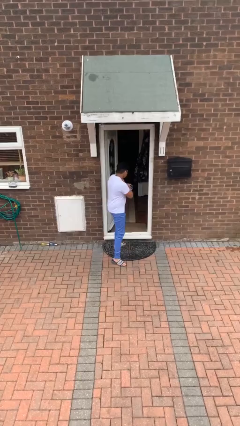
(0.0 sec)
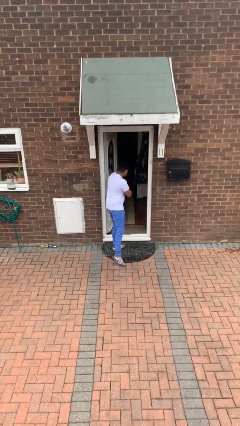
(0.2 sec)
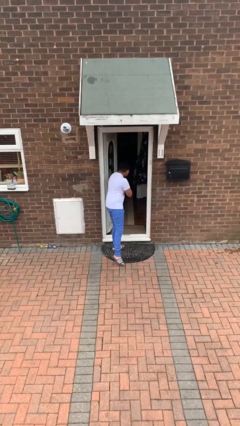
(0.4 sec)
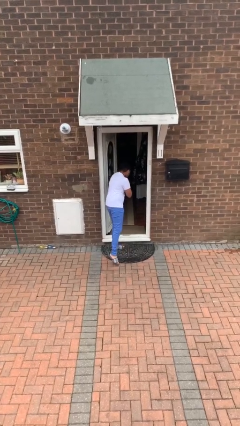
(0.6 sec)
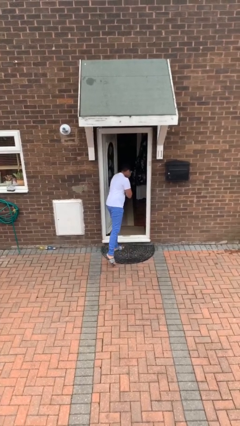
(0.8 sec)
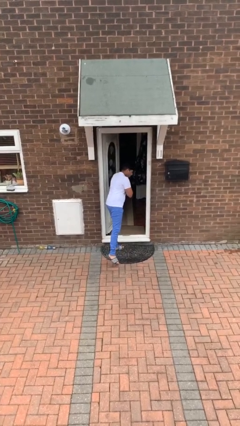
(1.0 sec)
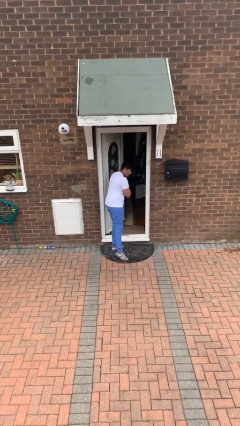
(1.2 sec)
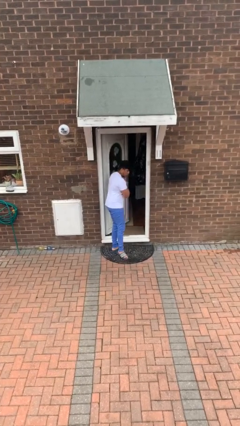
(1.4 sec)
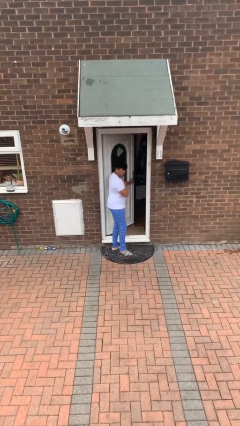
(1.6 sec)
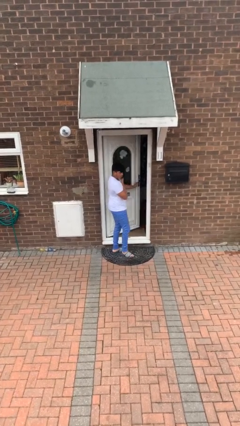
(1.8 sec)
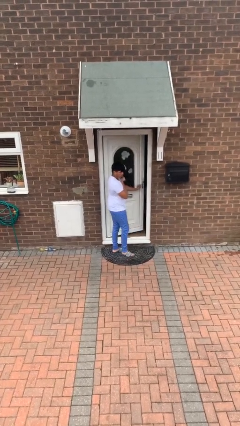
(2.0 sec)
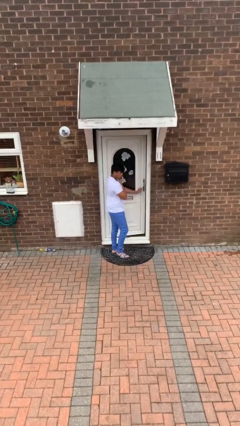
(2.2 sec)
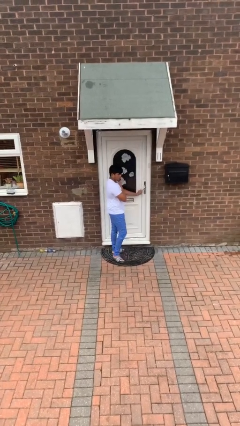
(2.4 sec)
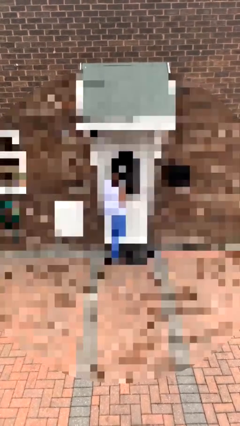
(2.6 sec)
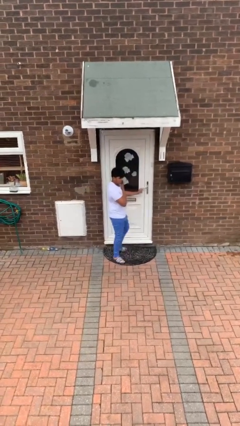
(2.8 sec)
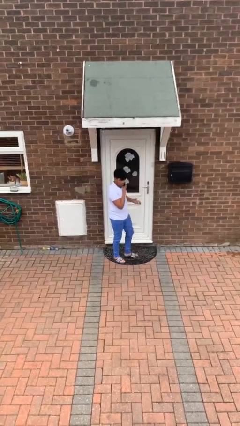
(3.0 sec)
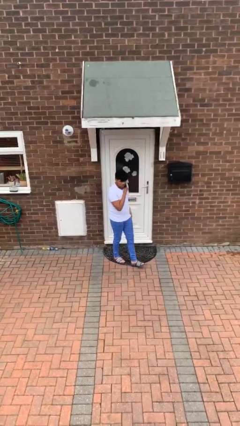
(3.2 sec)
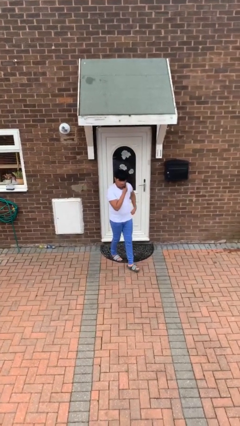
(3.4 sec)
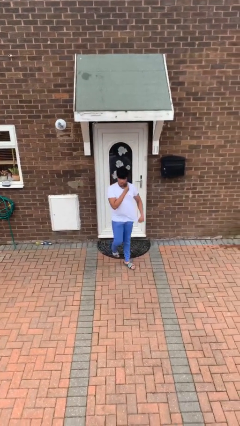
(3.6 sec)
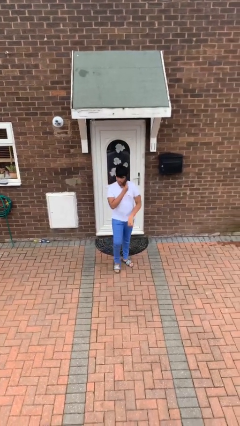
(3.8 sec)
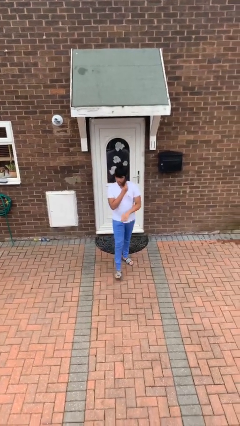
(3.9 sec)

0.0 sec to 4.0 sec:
person closes facility door

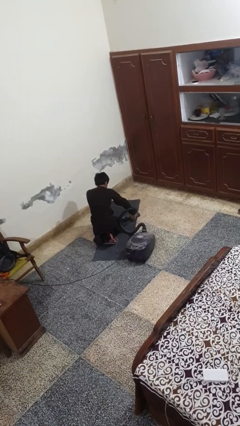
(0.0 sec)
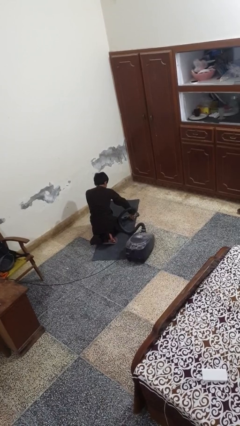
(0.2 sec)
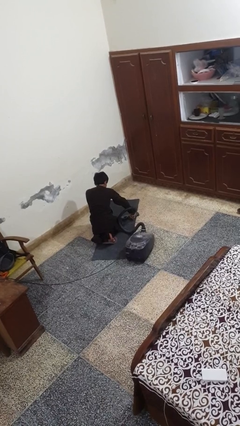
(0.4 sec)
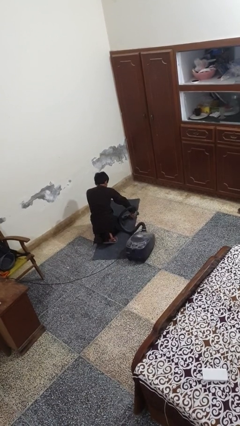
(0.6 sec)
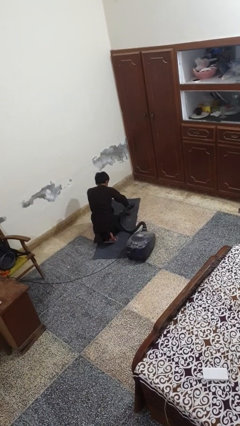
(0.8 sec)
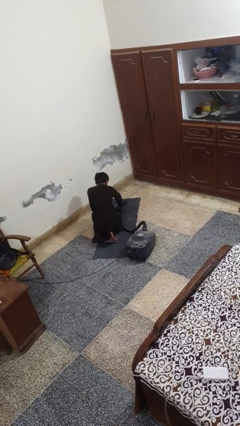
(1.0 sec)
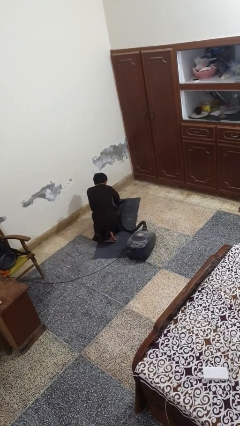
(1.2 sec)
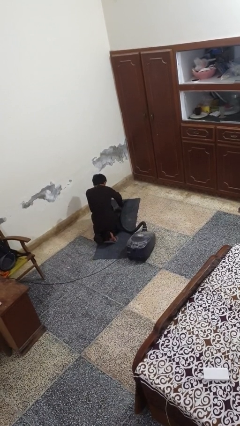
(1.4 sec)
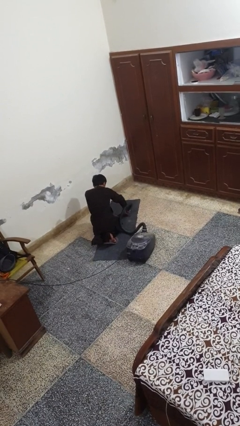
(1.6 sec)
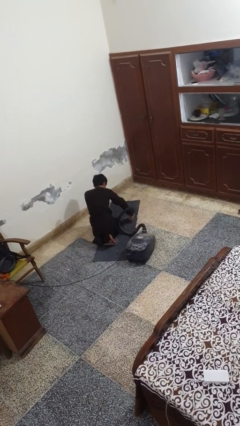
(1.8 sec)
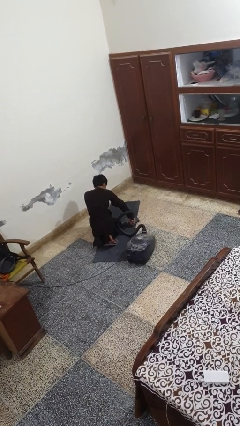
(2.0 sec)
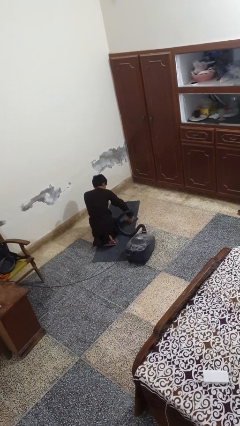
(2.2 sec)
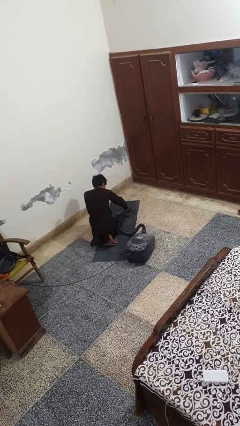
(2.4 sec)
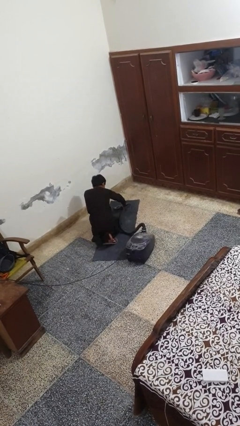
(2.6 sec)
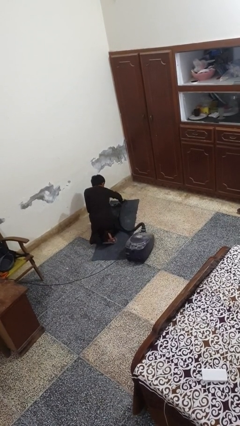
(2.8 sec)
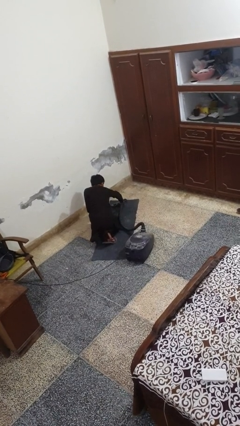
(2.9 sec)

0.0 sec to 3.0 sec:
person vacuums carpet

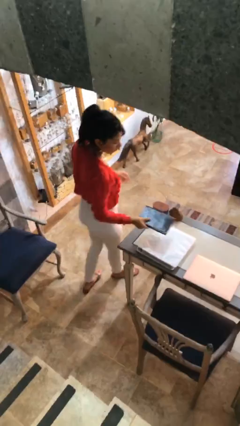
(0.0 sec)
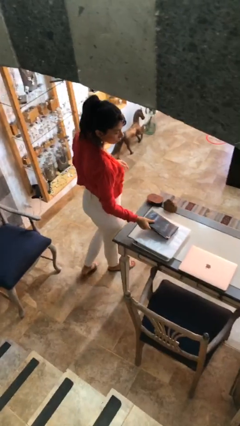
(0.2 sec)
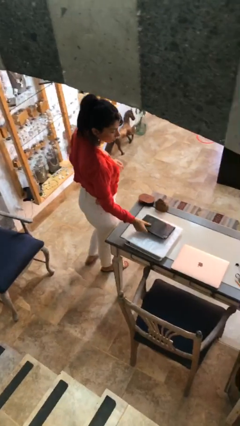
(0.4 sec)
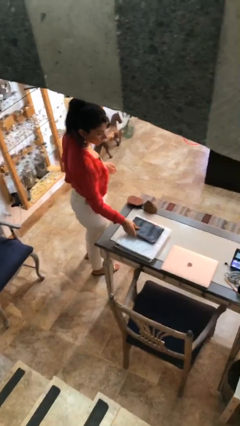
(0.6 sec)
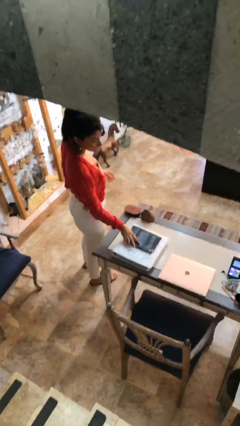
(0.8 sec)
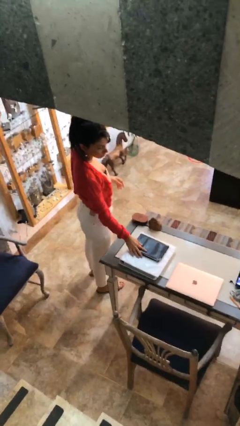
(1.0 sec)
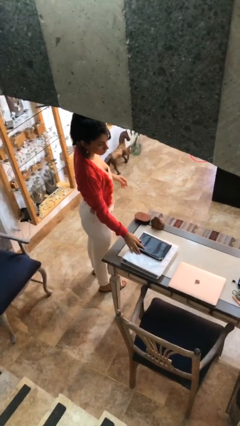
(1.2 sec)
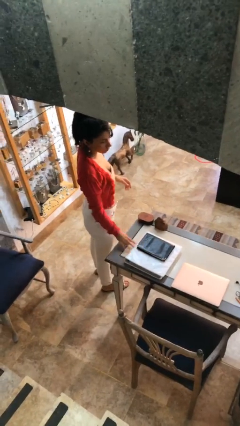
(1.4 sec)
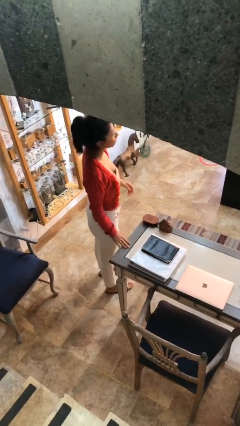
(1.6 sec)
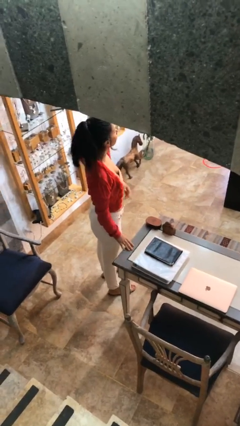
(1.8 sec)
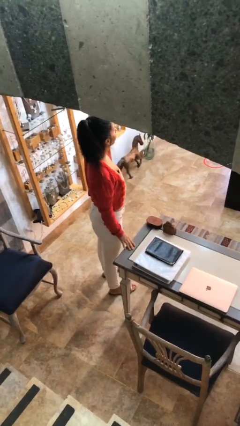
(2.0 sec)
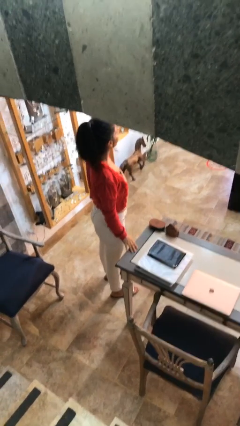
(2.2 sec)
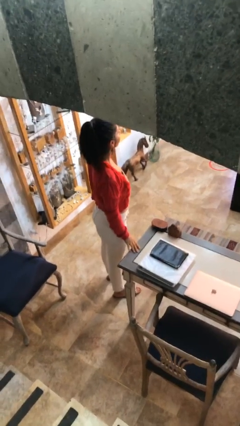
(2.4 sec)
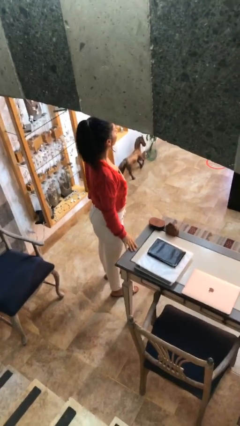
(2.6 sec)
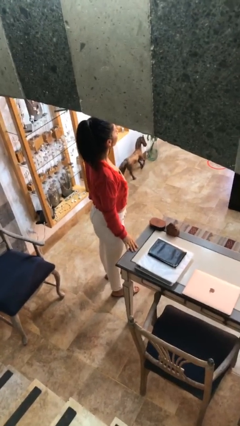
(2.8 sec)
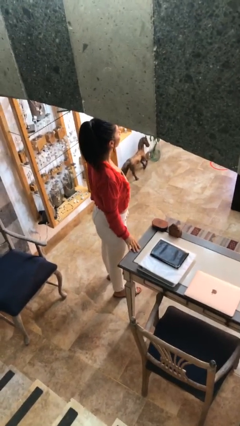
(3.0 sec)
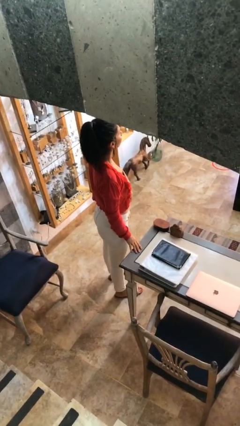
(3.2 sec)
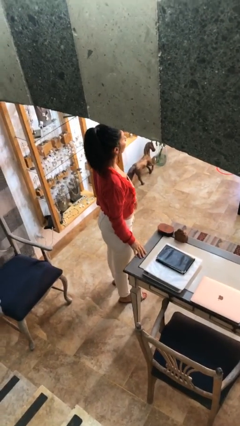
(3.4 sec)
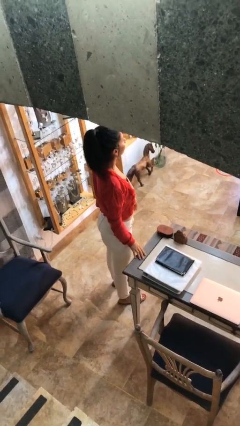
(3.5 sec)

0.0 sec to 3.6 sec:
person puts down object on table

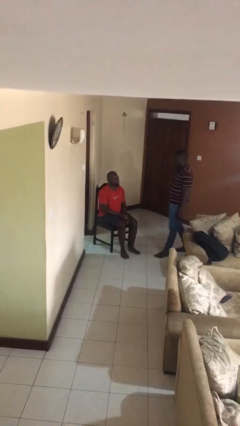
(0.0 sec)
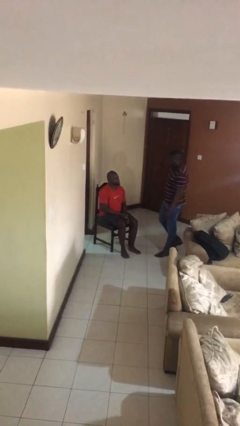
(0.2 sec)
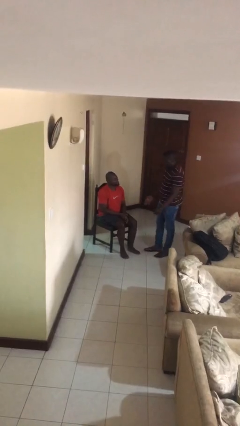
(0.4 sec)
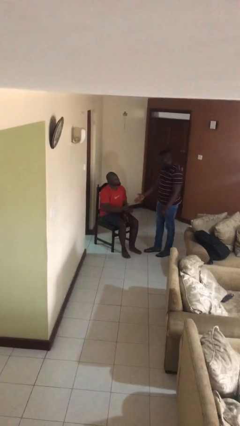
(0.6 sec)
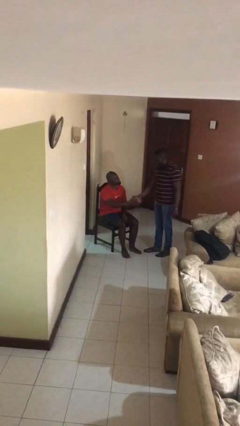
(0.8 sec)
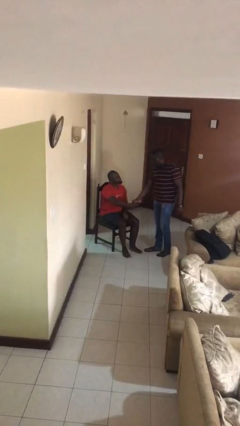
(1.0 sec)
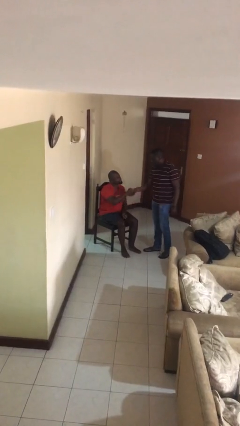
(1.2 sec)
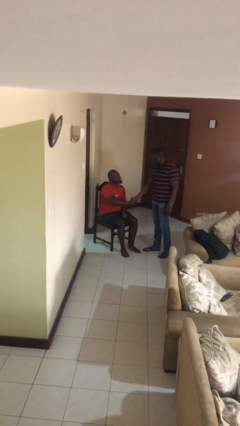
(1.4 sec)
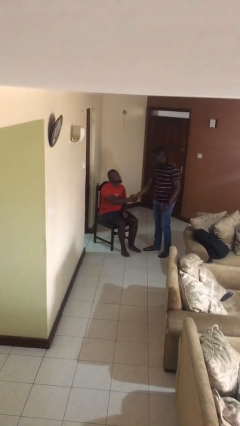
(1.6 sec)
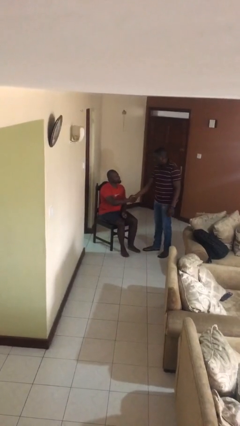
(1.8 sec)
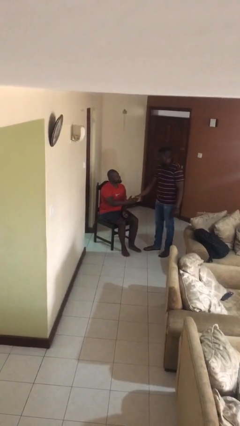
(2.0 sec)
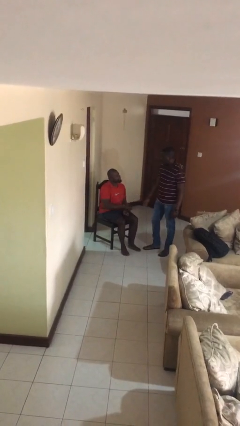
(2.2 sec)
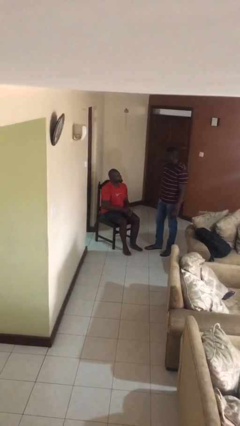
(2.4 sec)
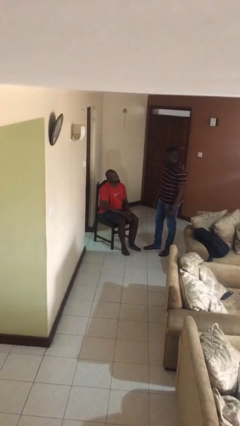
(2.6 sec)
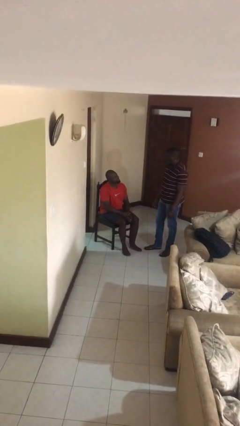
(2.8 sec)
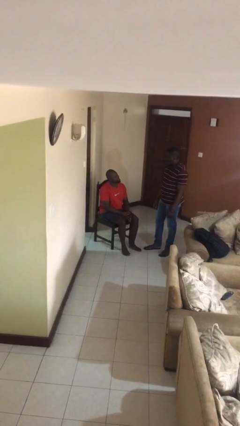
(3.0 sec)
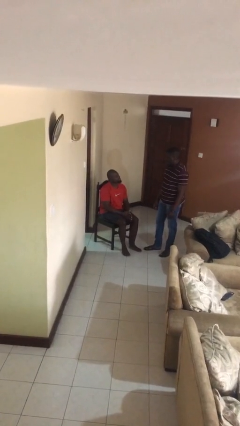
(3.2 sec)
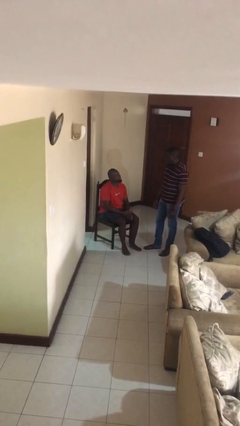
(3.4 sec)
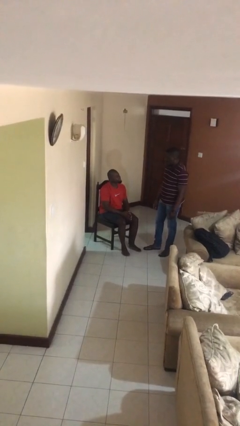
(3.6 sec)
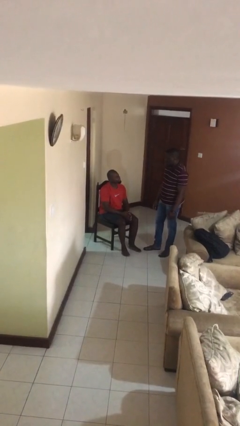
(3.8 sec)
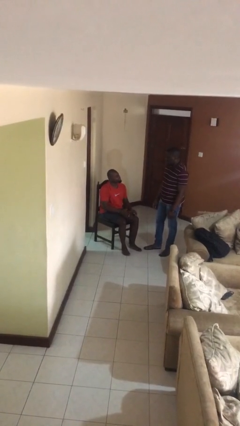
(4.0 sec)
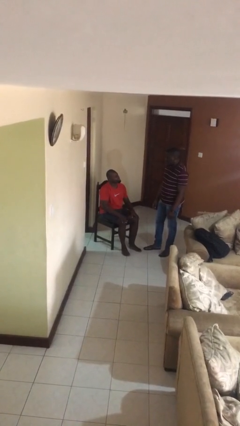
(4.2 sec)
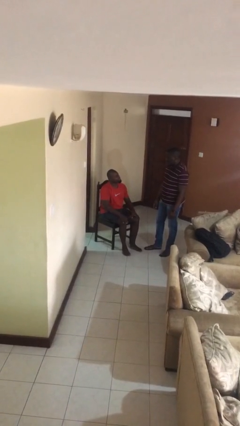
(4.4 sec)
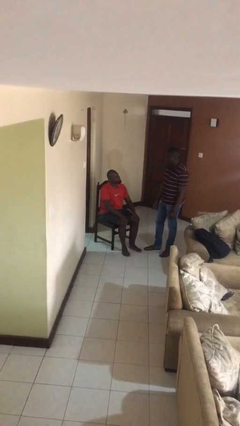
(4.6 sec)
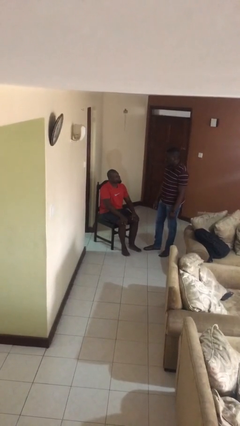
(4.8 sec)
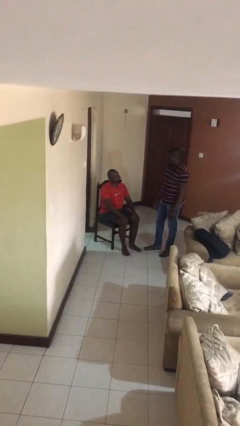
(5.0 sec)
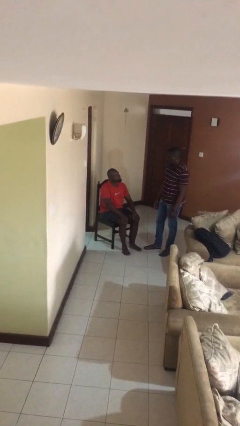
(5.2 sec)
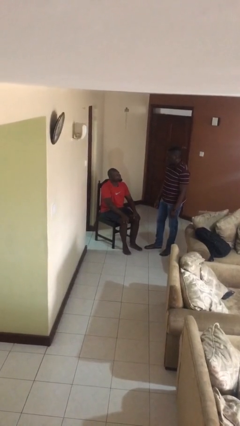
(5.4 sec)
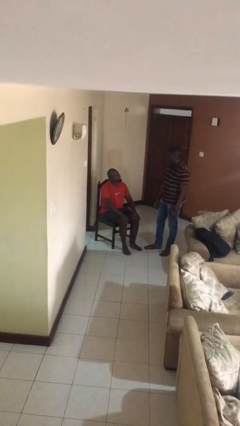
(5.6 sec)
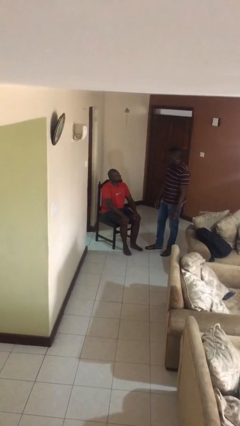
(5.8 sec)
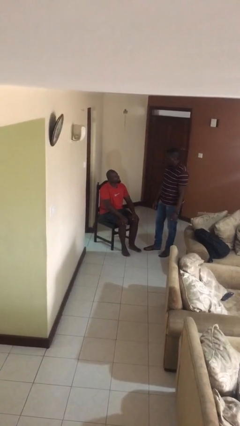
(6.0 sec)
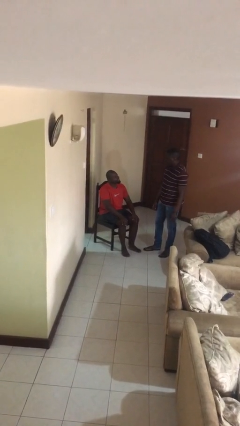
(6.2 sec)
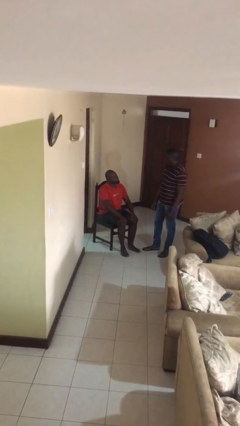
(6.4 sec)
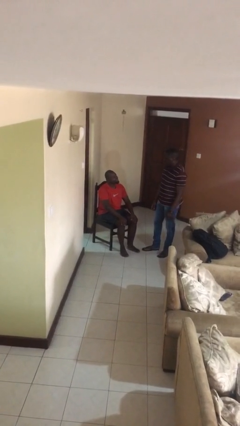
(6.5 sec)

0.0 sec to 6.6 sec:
person shakes hand

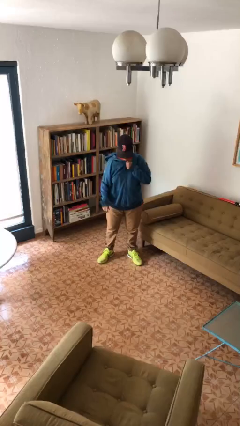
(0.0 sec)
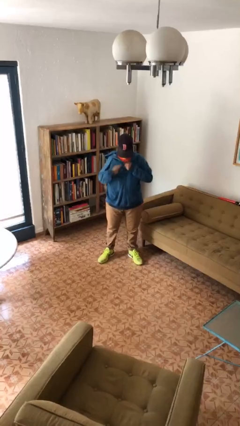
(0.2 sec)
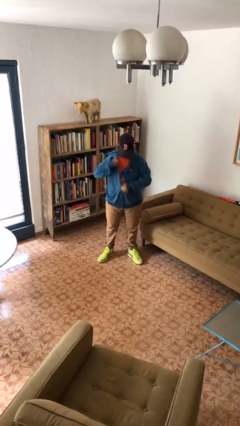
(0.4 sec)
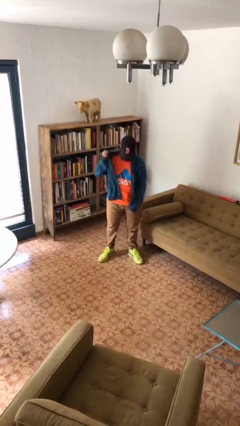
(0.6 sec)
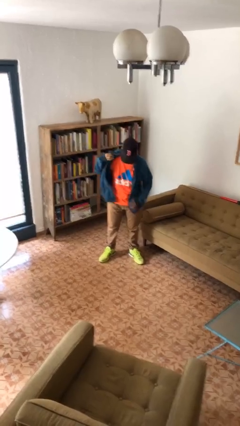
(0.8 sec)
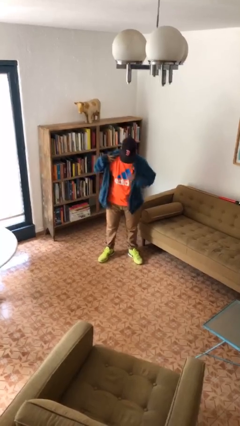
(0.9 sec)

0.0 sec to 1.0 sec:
person unzips jacket
